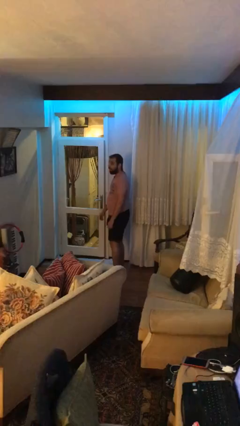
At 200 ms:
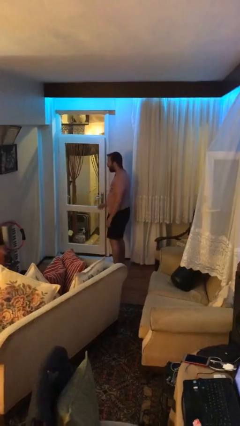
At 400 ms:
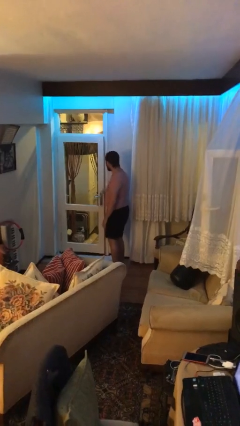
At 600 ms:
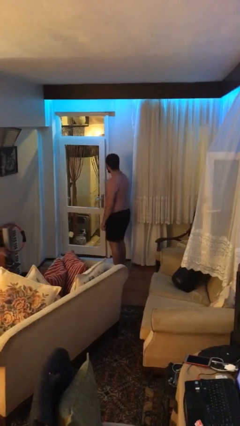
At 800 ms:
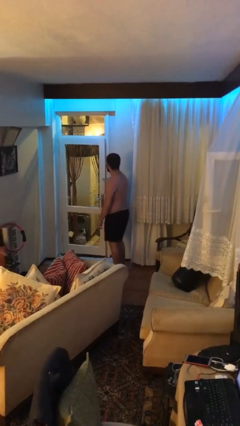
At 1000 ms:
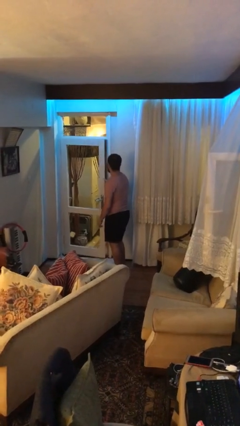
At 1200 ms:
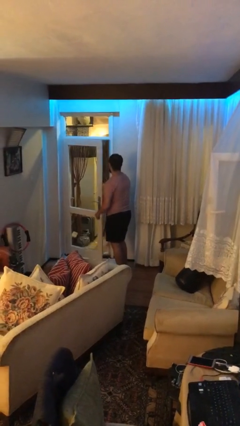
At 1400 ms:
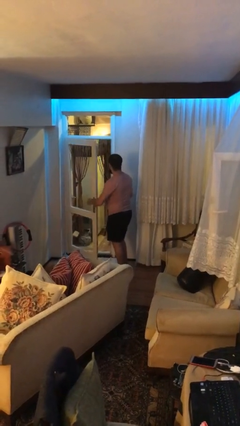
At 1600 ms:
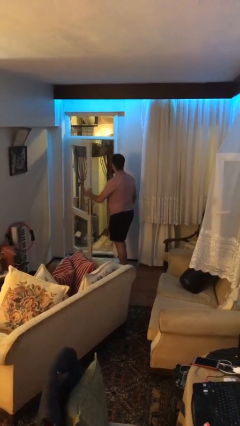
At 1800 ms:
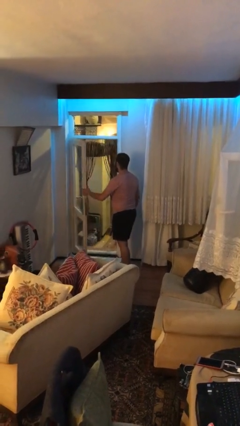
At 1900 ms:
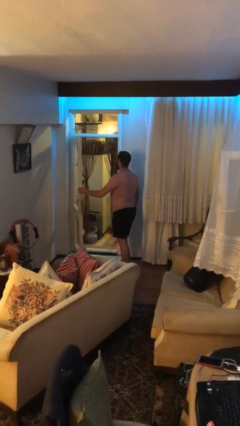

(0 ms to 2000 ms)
person opens facility door

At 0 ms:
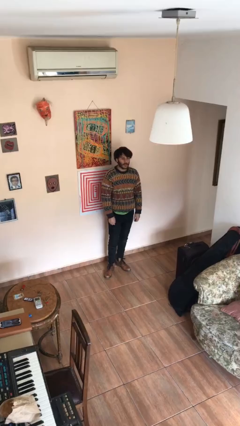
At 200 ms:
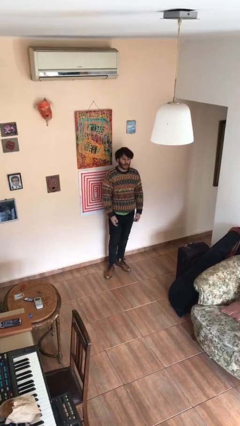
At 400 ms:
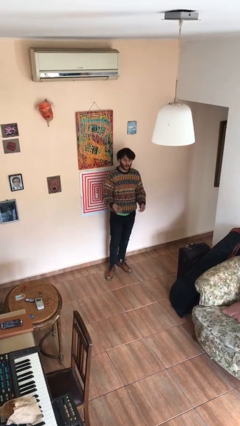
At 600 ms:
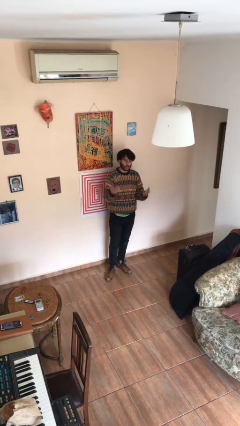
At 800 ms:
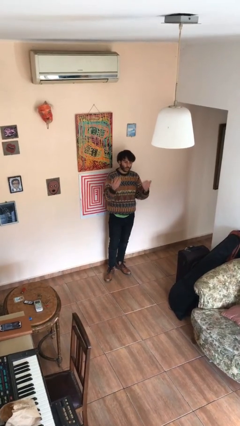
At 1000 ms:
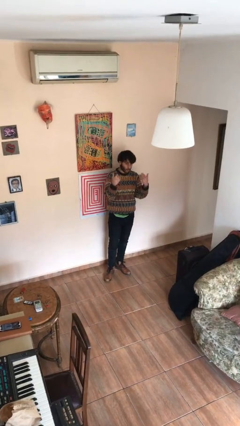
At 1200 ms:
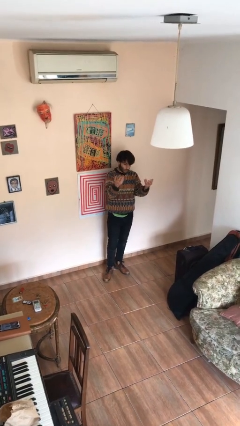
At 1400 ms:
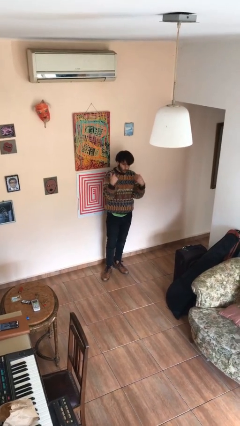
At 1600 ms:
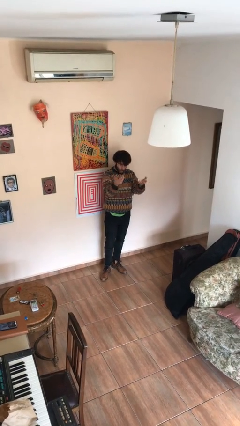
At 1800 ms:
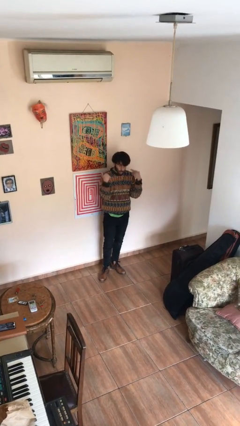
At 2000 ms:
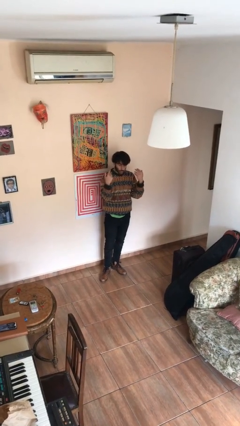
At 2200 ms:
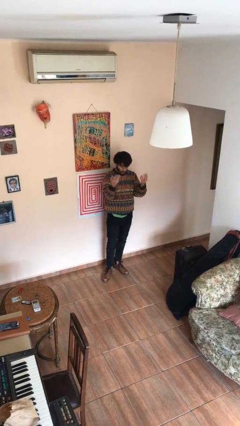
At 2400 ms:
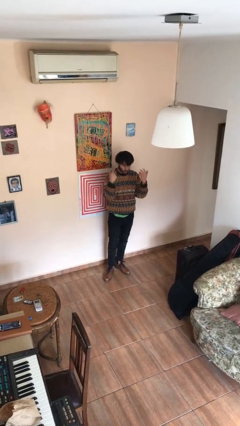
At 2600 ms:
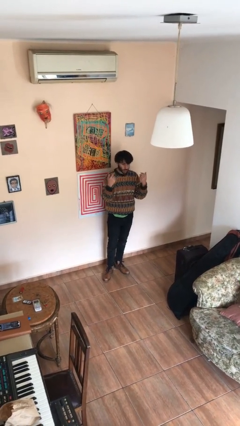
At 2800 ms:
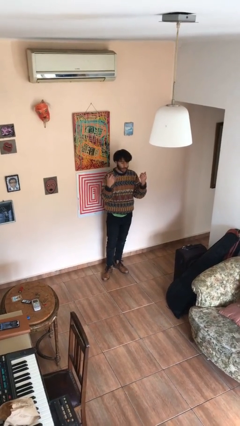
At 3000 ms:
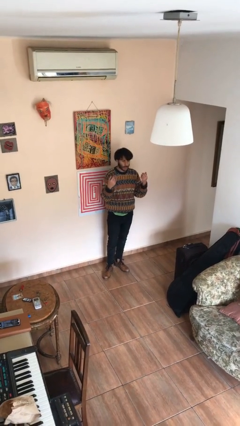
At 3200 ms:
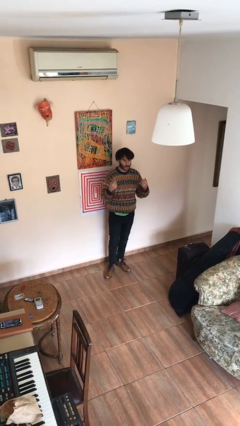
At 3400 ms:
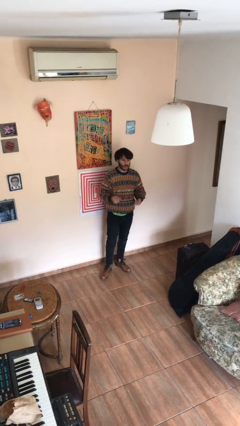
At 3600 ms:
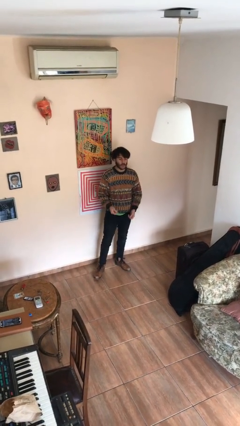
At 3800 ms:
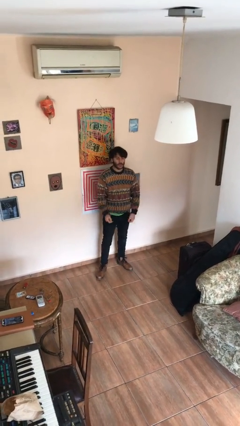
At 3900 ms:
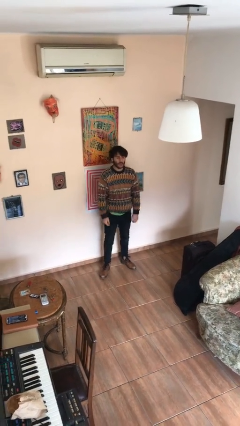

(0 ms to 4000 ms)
person gestures come here

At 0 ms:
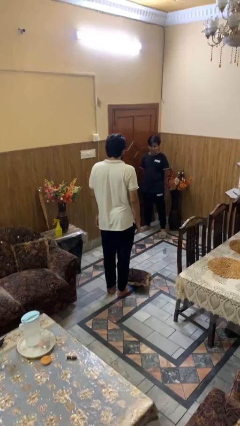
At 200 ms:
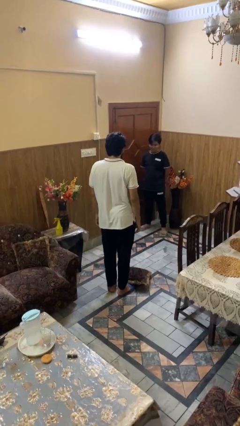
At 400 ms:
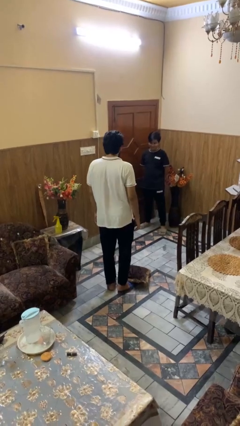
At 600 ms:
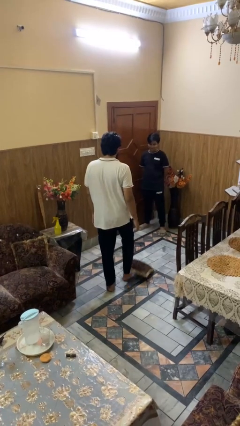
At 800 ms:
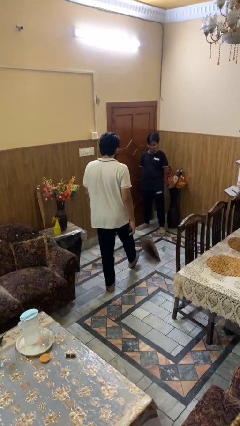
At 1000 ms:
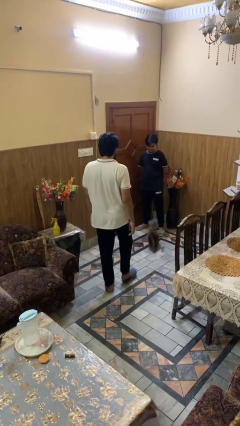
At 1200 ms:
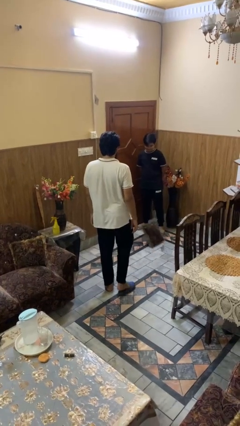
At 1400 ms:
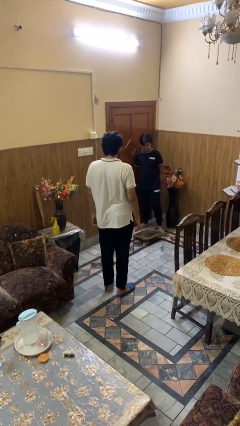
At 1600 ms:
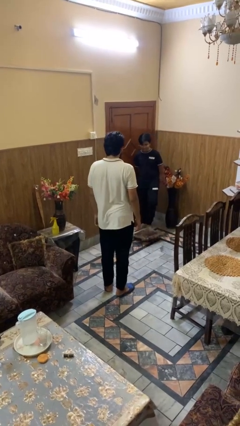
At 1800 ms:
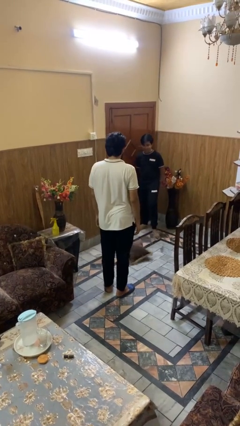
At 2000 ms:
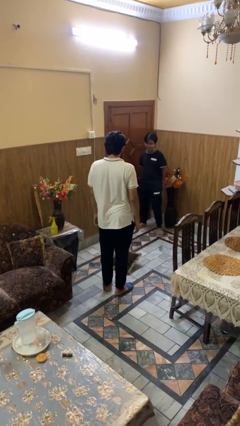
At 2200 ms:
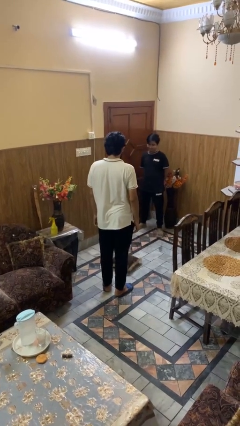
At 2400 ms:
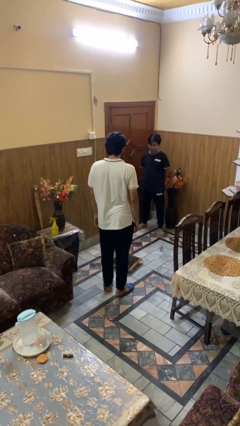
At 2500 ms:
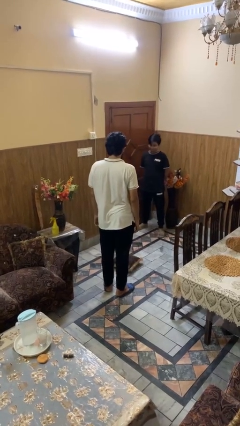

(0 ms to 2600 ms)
person kicks object to person

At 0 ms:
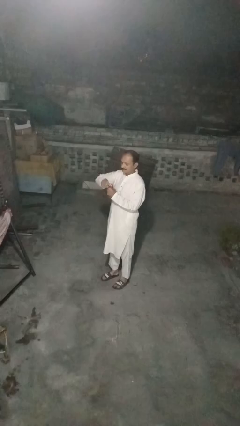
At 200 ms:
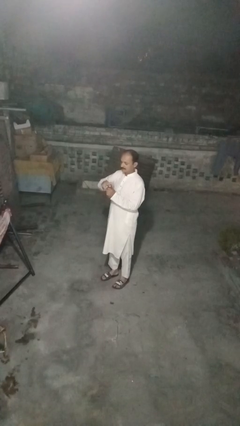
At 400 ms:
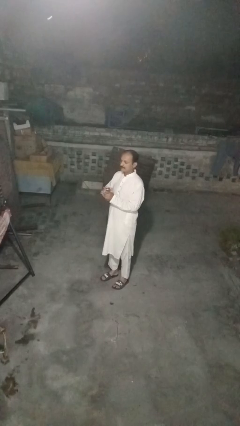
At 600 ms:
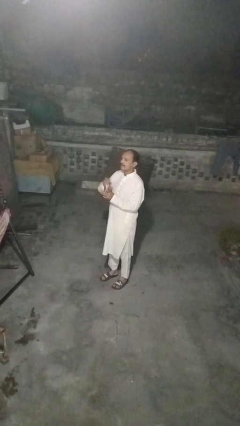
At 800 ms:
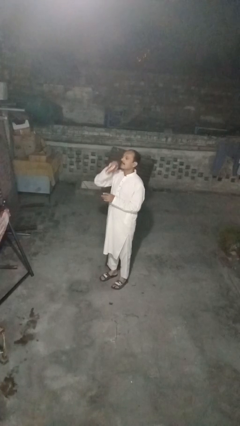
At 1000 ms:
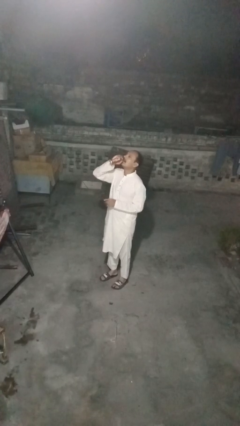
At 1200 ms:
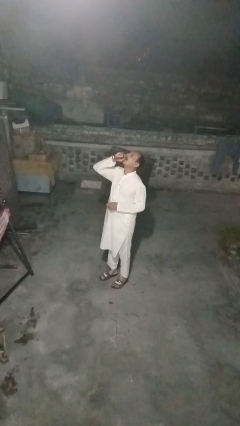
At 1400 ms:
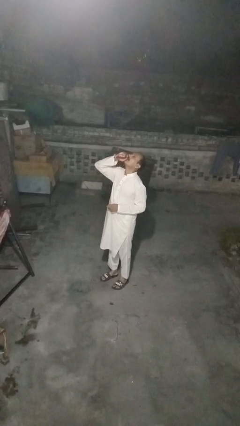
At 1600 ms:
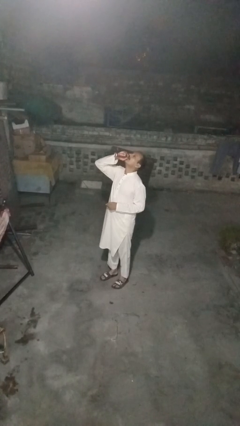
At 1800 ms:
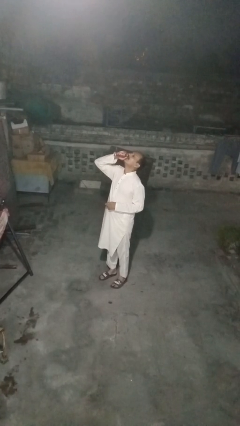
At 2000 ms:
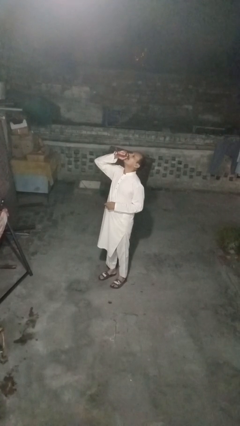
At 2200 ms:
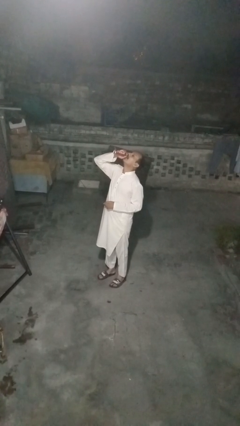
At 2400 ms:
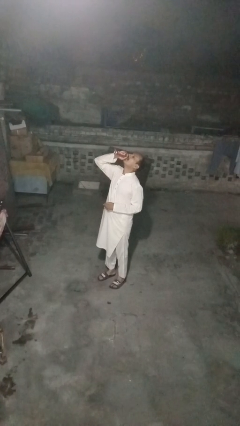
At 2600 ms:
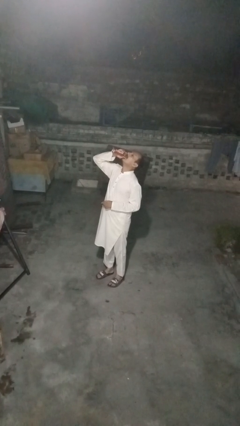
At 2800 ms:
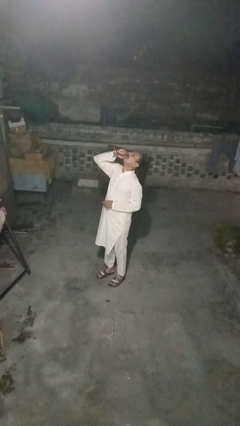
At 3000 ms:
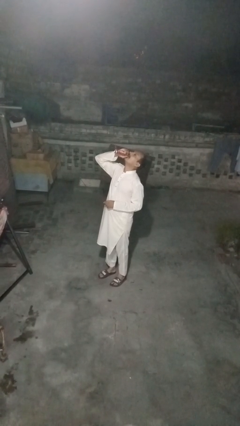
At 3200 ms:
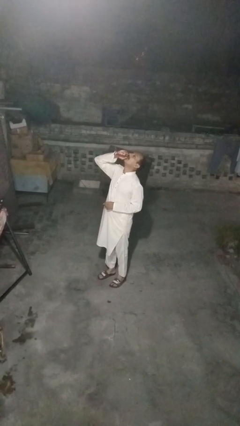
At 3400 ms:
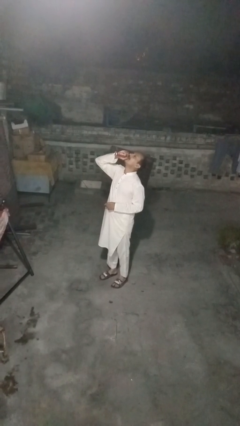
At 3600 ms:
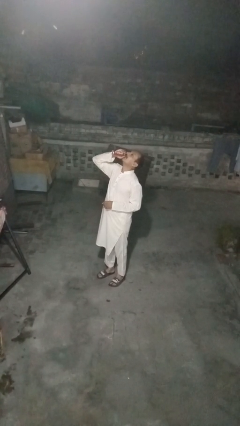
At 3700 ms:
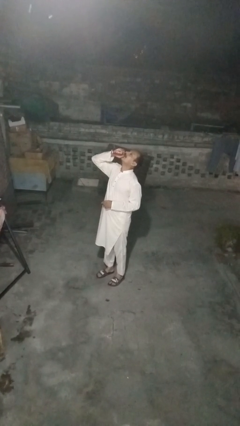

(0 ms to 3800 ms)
person drinks from beverage can

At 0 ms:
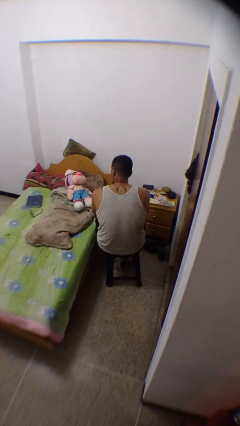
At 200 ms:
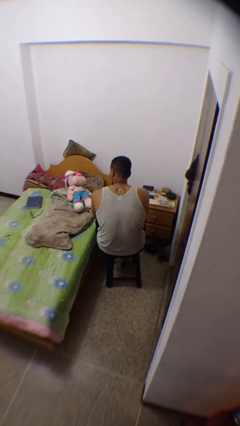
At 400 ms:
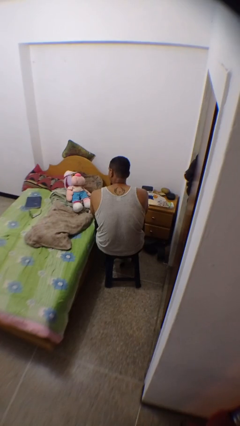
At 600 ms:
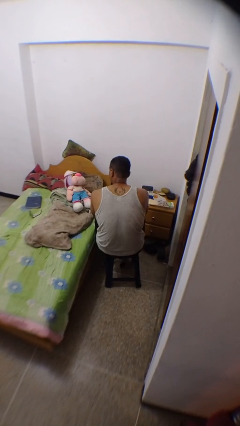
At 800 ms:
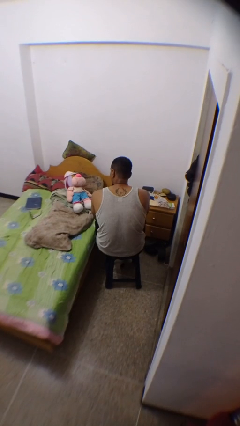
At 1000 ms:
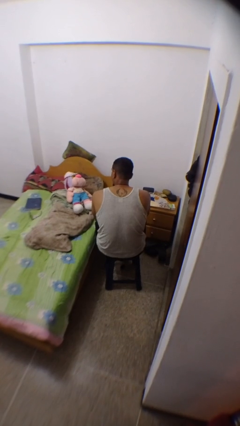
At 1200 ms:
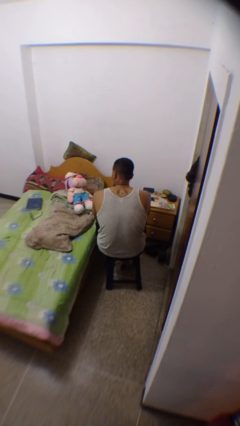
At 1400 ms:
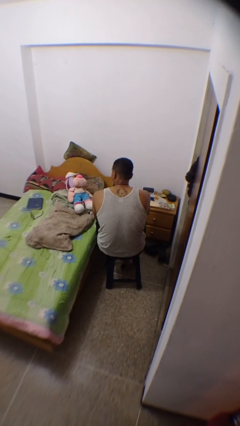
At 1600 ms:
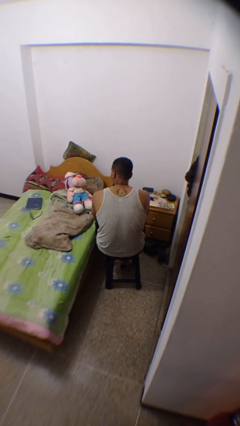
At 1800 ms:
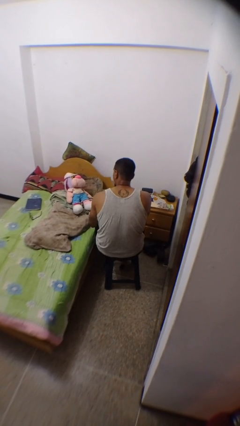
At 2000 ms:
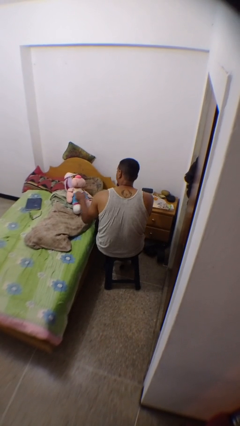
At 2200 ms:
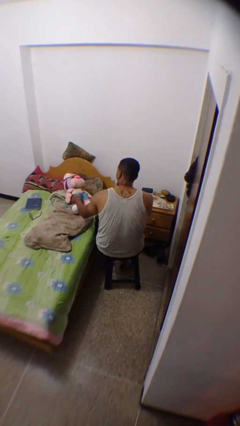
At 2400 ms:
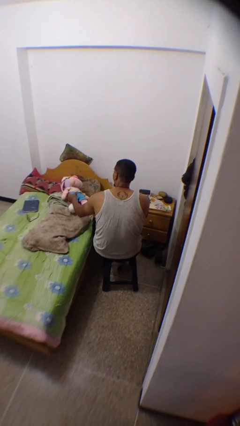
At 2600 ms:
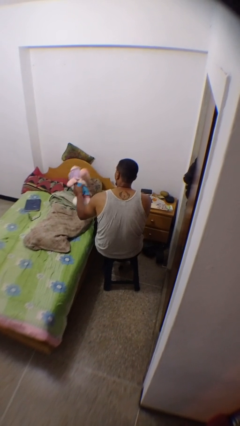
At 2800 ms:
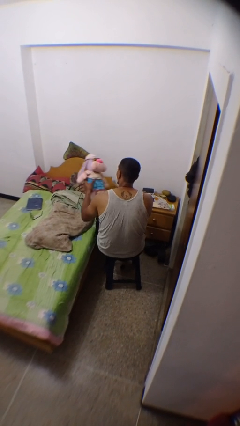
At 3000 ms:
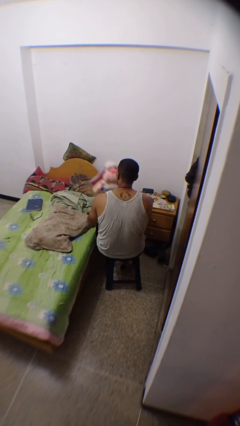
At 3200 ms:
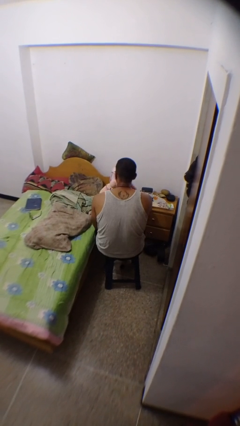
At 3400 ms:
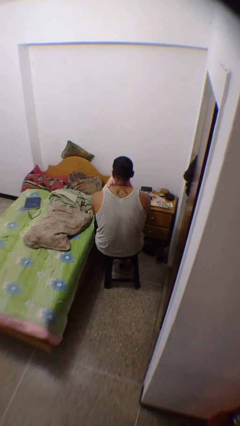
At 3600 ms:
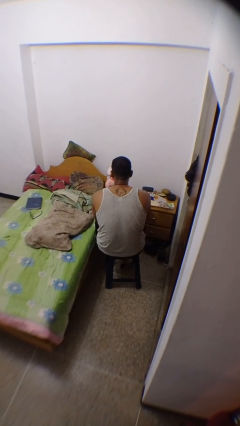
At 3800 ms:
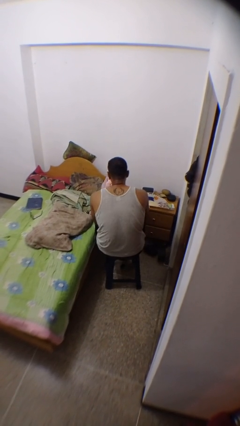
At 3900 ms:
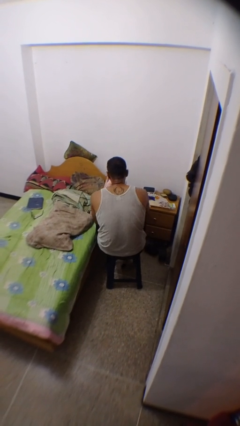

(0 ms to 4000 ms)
person picks up object from bed

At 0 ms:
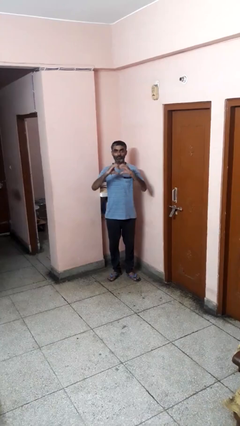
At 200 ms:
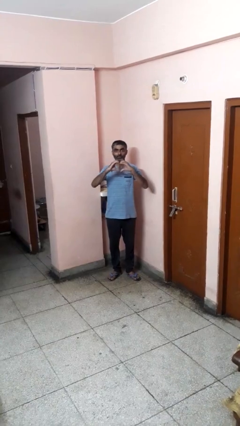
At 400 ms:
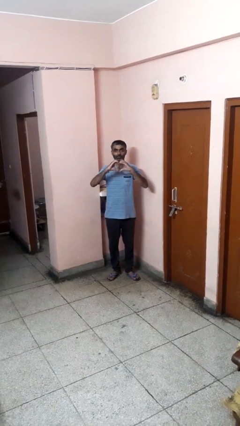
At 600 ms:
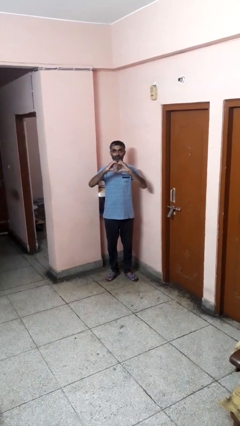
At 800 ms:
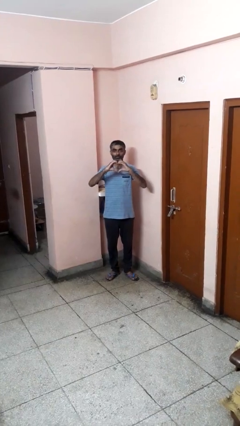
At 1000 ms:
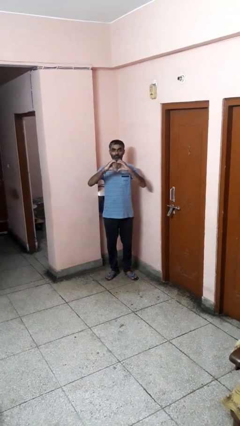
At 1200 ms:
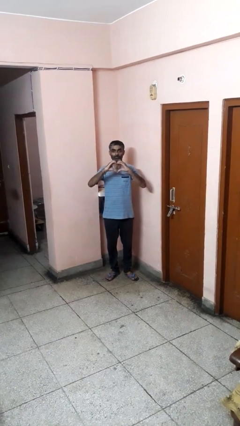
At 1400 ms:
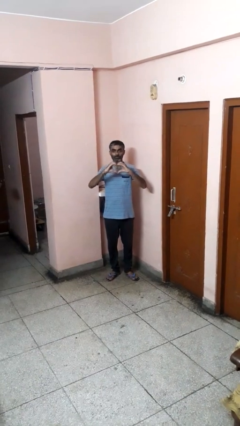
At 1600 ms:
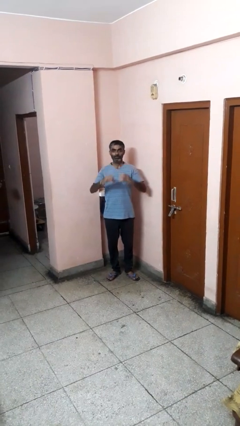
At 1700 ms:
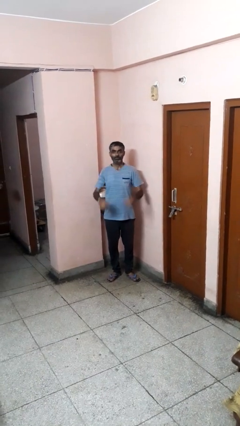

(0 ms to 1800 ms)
person gestures heart
